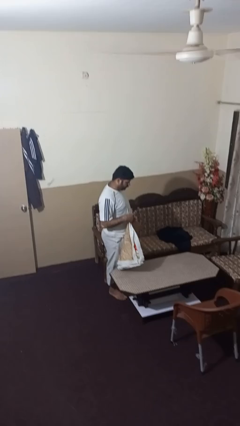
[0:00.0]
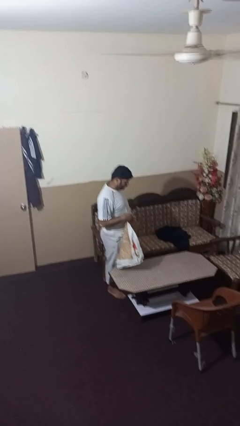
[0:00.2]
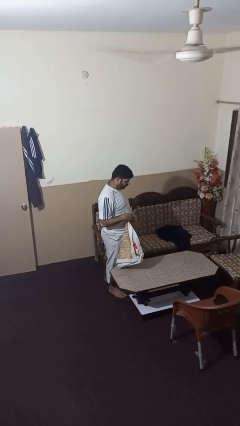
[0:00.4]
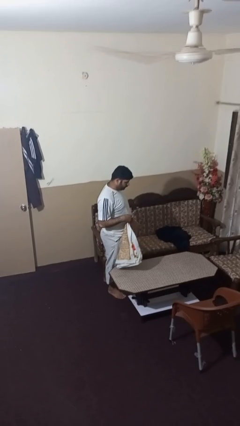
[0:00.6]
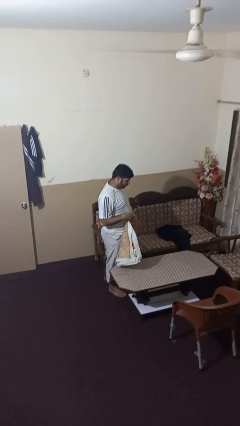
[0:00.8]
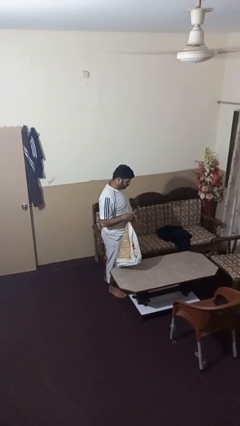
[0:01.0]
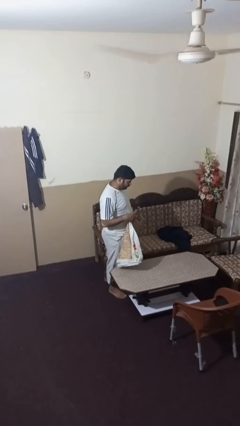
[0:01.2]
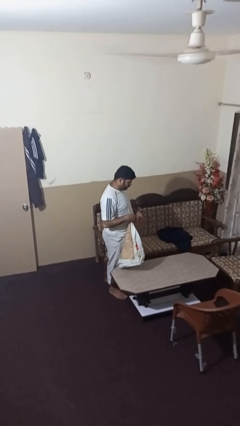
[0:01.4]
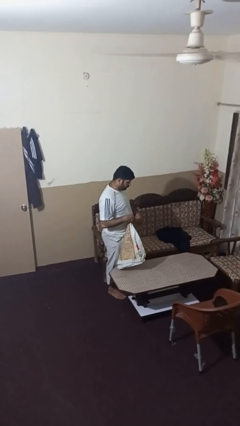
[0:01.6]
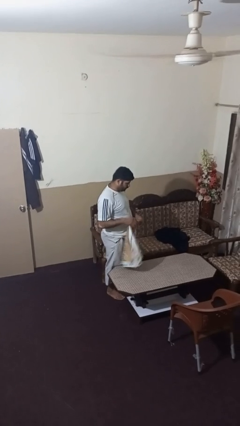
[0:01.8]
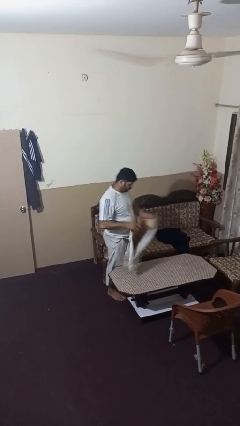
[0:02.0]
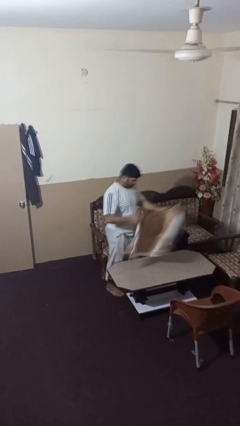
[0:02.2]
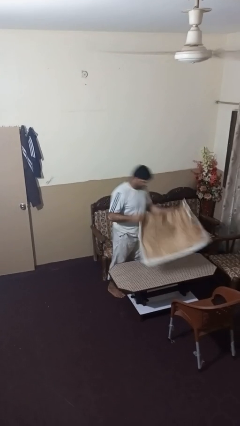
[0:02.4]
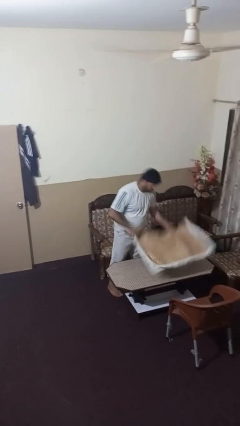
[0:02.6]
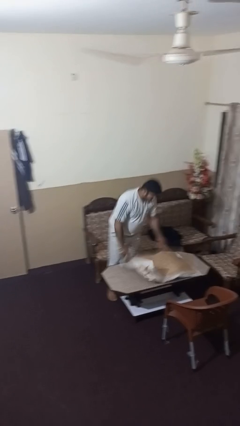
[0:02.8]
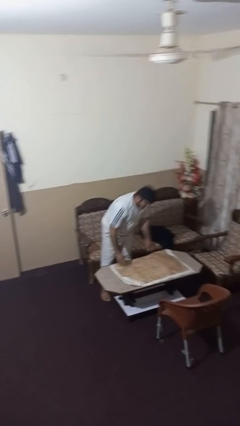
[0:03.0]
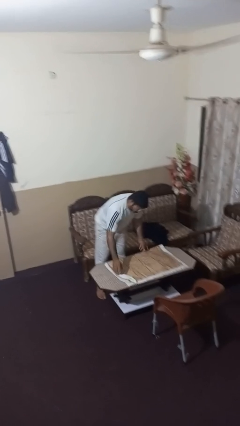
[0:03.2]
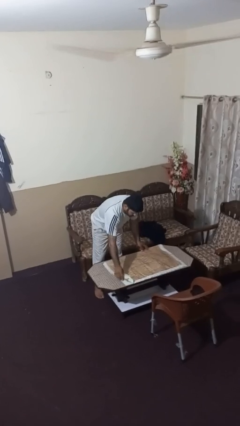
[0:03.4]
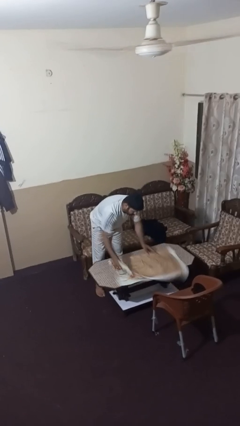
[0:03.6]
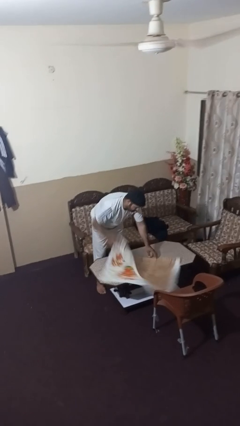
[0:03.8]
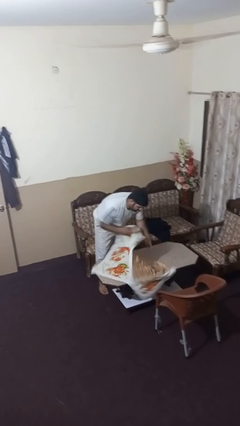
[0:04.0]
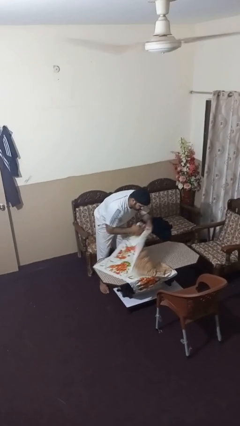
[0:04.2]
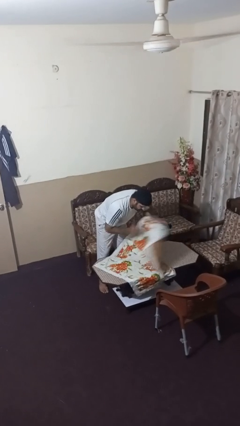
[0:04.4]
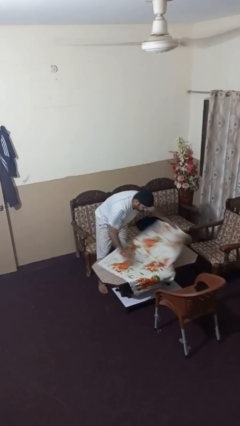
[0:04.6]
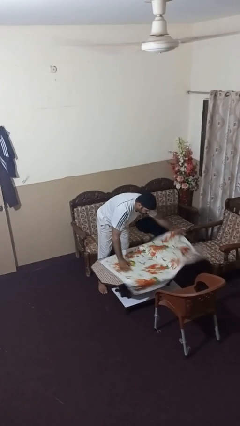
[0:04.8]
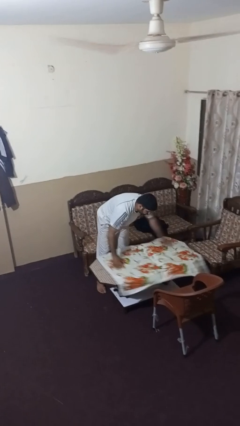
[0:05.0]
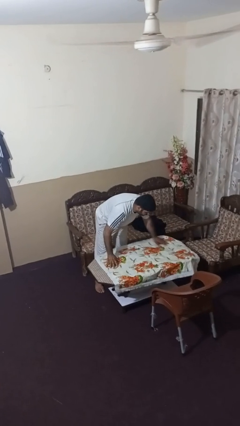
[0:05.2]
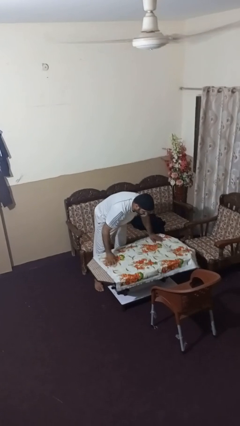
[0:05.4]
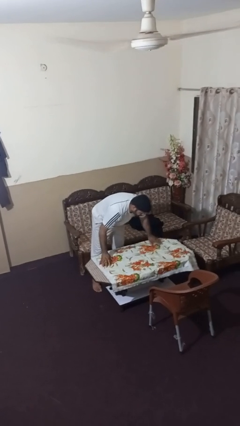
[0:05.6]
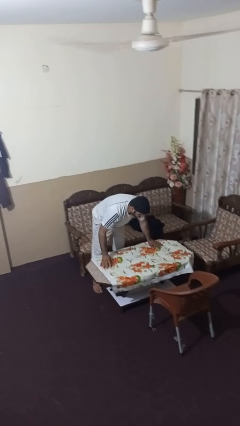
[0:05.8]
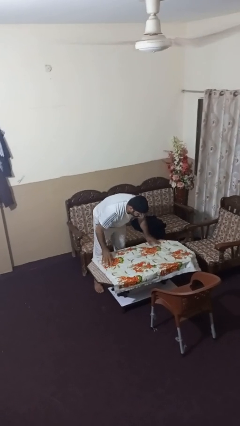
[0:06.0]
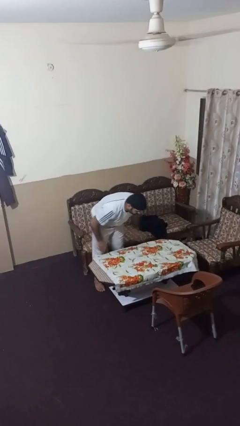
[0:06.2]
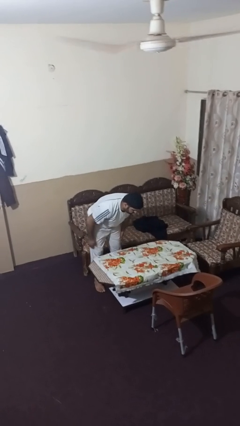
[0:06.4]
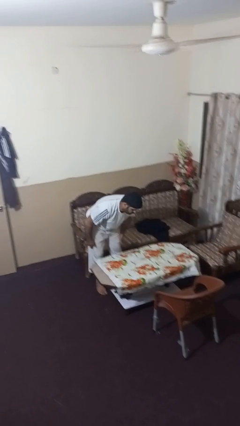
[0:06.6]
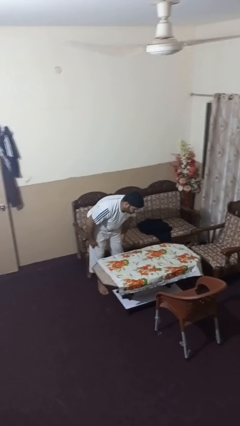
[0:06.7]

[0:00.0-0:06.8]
person spreads tablecloth

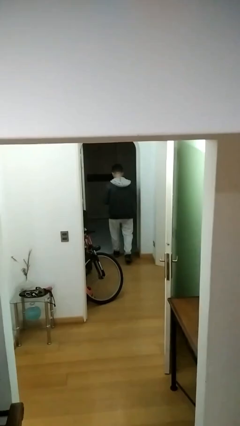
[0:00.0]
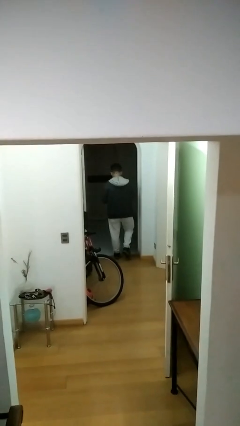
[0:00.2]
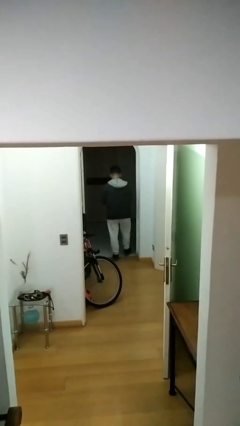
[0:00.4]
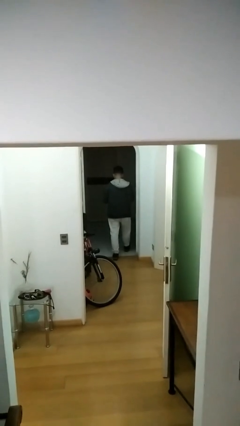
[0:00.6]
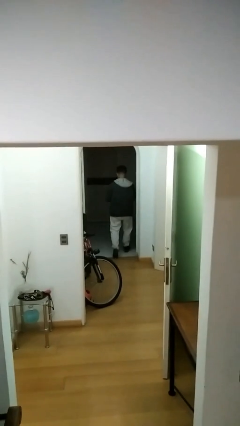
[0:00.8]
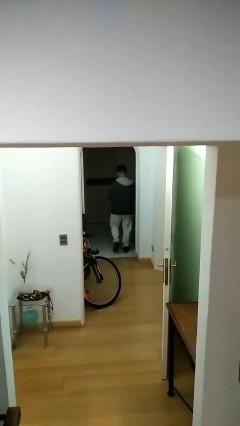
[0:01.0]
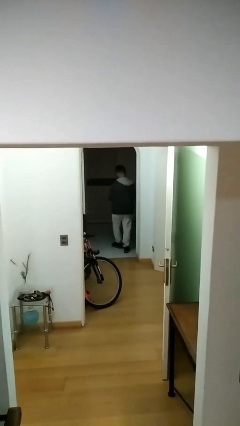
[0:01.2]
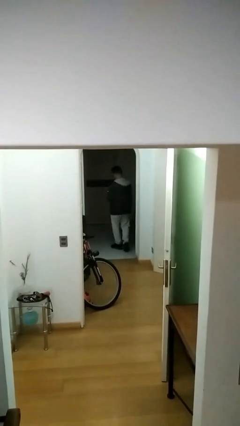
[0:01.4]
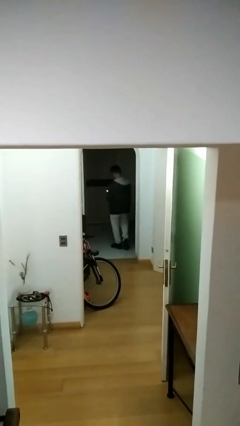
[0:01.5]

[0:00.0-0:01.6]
person exits scene through structure

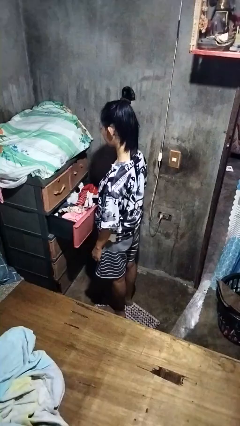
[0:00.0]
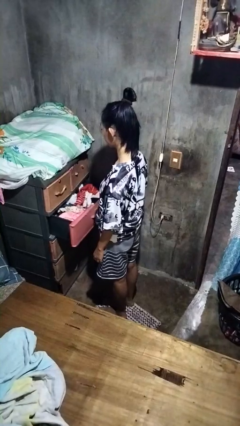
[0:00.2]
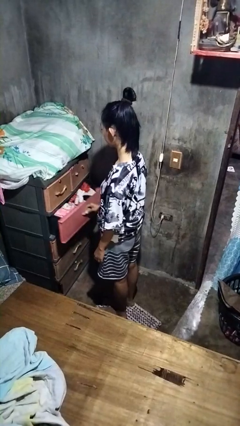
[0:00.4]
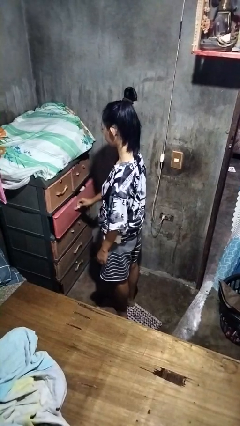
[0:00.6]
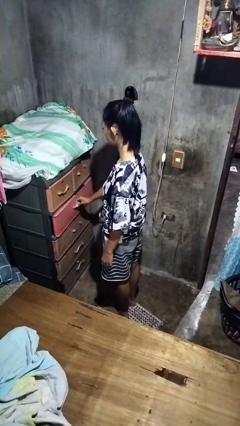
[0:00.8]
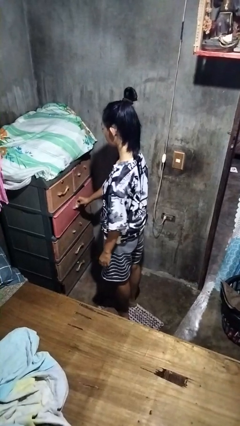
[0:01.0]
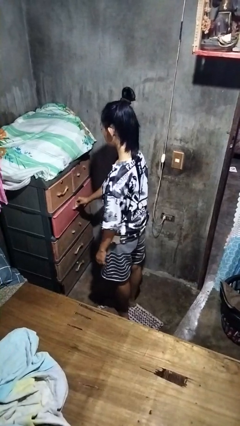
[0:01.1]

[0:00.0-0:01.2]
person closes dresser drawer

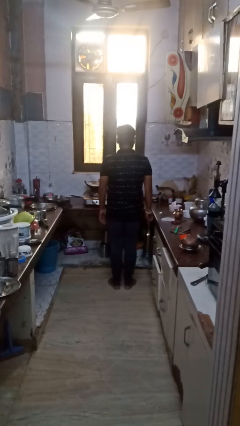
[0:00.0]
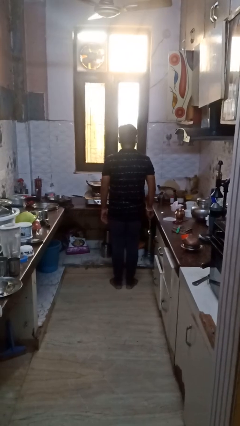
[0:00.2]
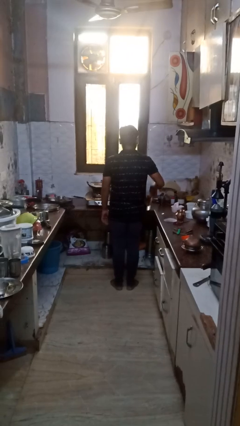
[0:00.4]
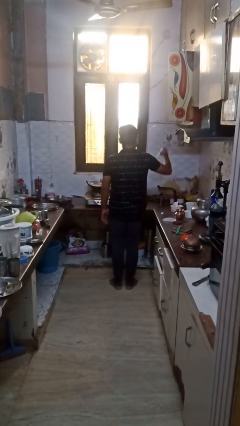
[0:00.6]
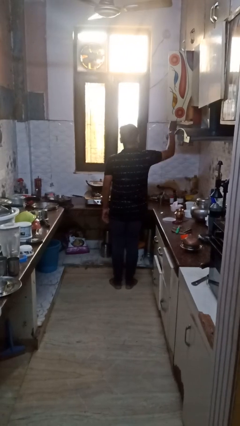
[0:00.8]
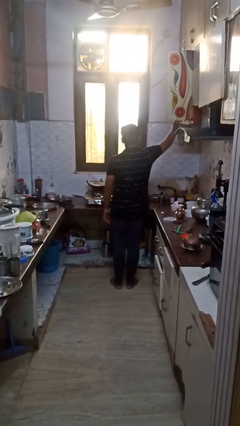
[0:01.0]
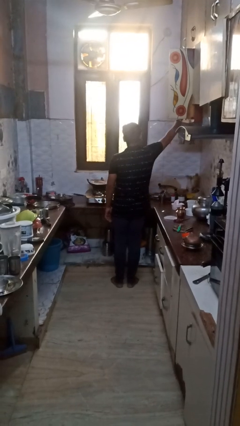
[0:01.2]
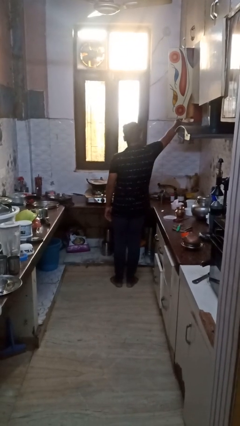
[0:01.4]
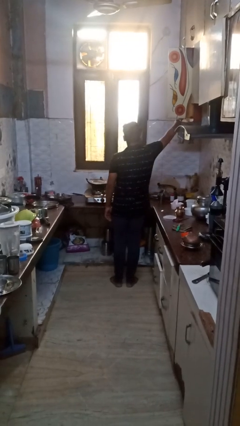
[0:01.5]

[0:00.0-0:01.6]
person takes object from cabinet

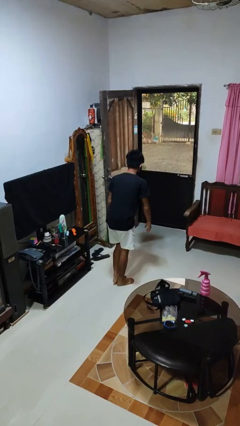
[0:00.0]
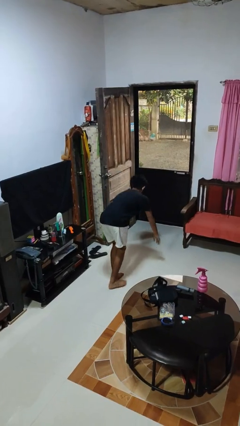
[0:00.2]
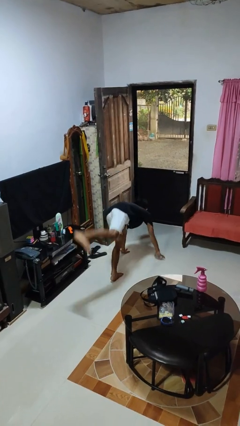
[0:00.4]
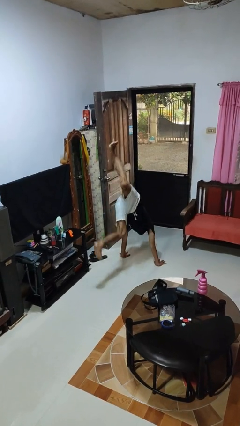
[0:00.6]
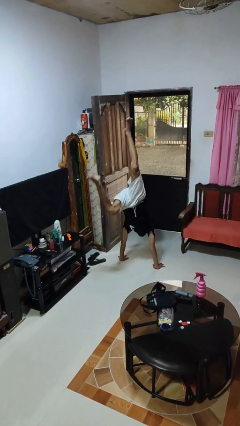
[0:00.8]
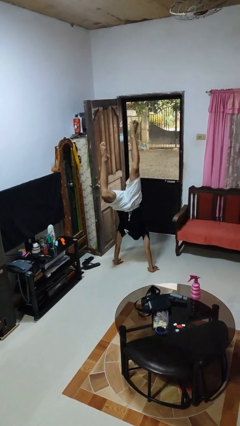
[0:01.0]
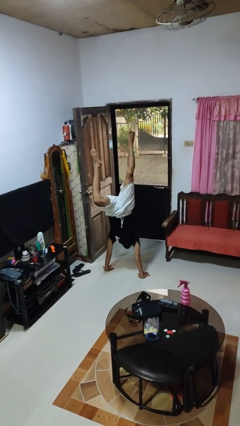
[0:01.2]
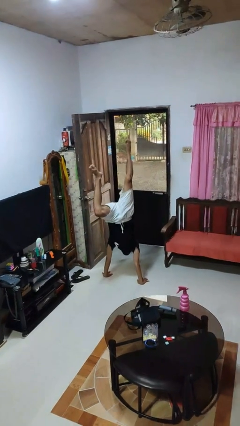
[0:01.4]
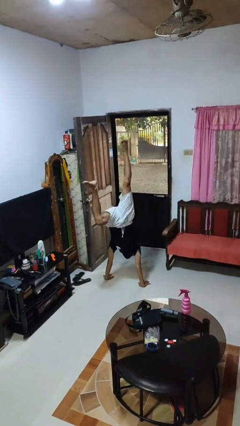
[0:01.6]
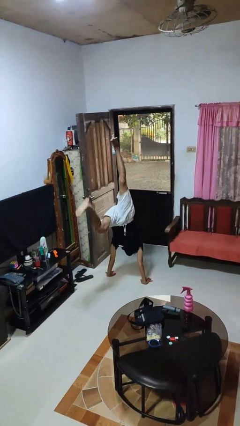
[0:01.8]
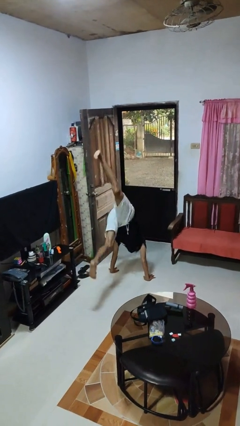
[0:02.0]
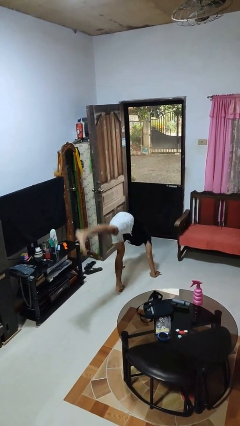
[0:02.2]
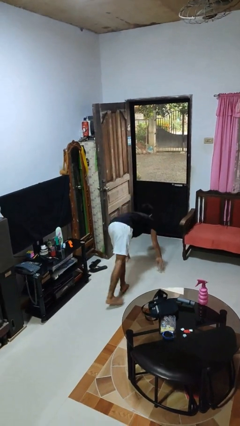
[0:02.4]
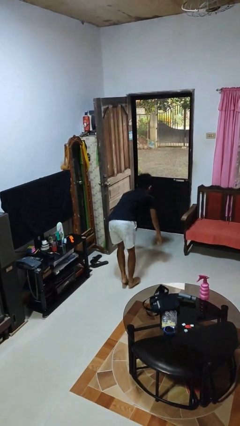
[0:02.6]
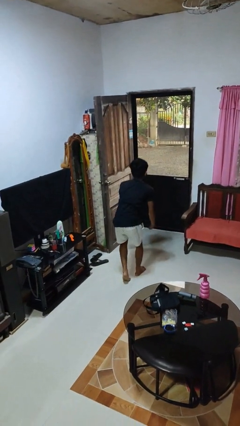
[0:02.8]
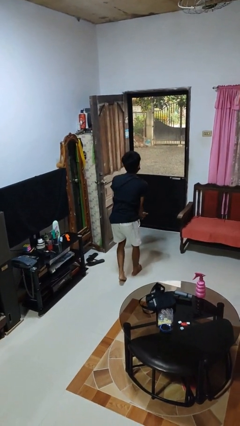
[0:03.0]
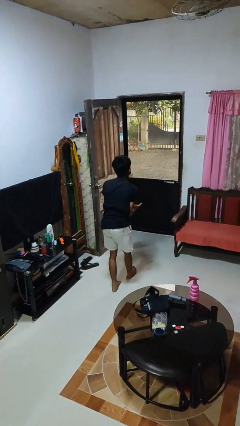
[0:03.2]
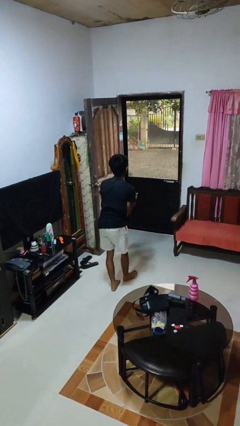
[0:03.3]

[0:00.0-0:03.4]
person handstand

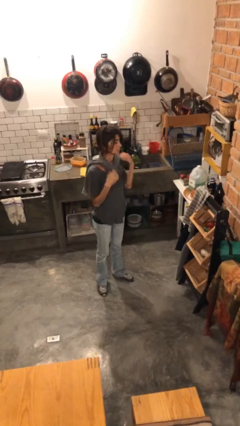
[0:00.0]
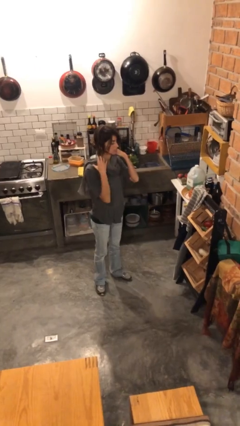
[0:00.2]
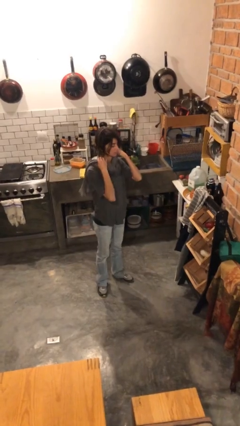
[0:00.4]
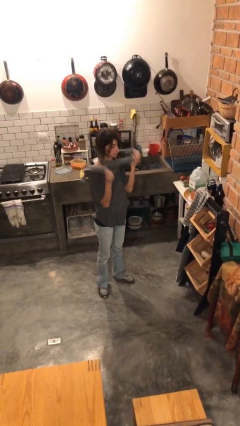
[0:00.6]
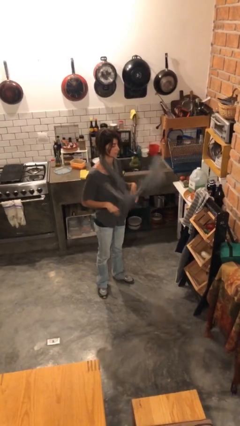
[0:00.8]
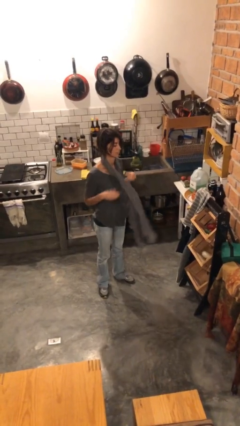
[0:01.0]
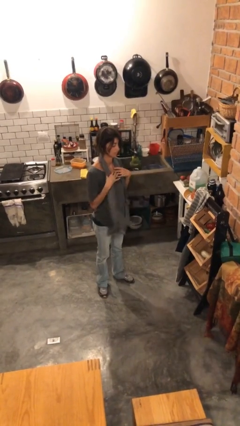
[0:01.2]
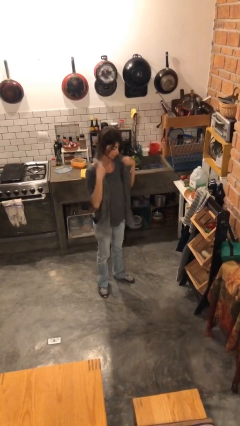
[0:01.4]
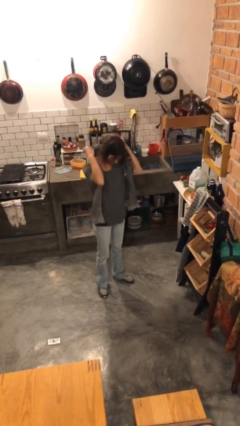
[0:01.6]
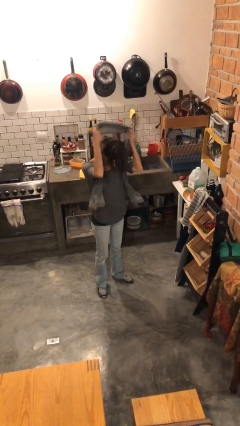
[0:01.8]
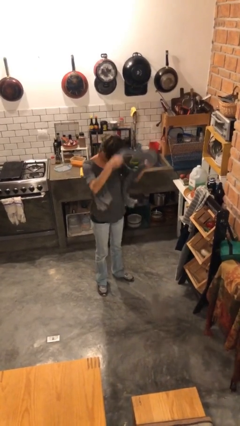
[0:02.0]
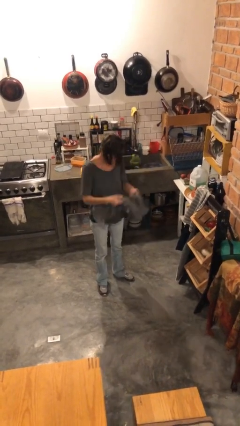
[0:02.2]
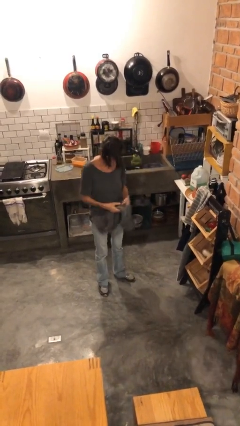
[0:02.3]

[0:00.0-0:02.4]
person takes off scarf

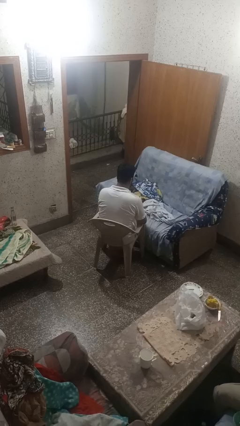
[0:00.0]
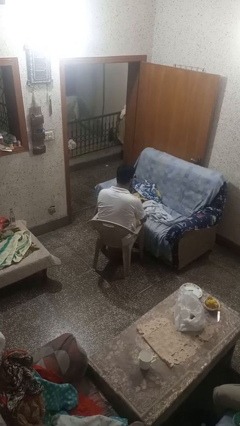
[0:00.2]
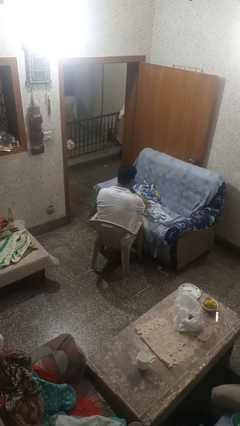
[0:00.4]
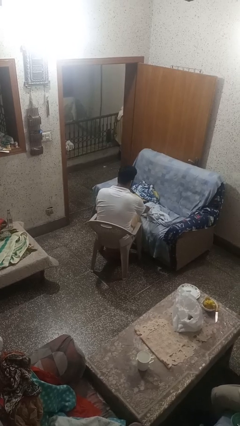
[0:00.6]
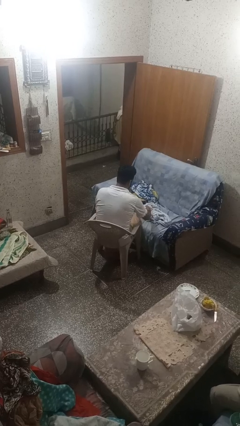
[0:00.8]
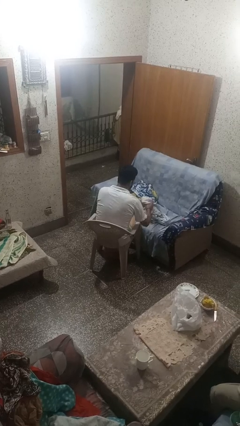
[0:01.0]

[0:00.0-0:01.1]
person folds shirt
